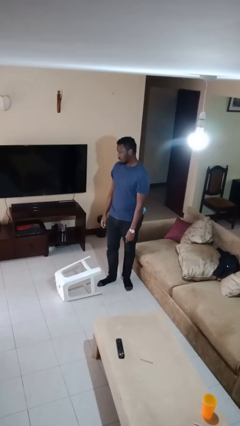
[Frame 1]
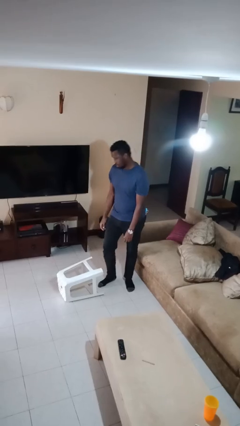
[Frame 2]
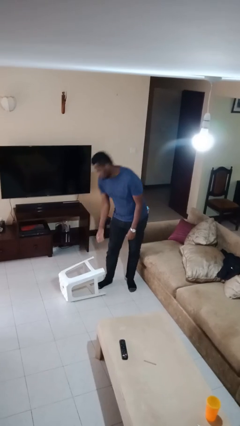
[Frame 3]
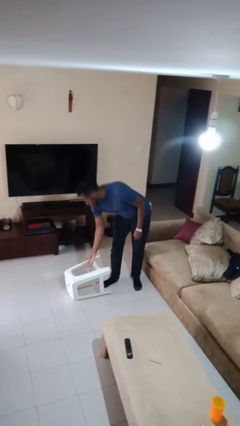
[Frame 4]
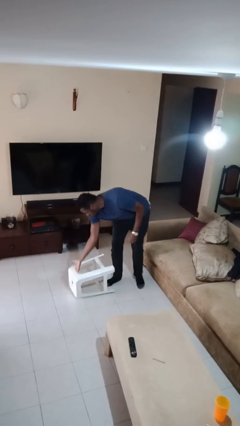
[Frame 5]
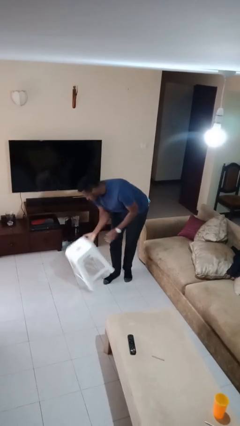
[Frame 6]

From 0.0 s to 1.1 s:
person knocks over furniture

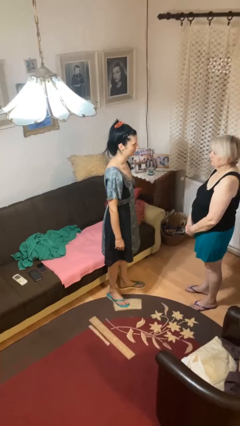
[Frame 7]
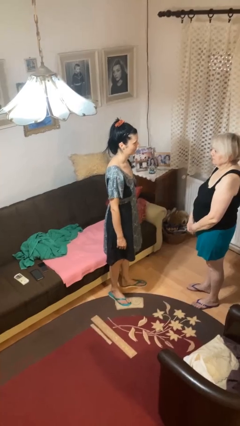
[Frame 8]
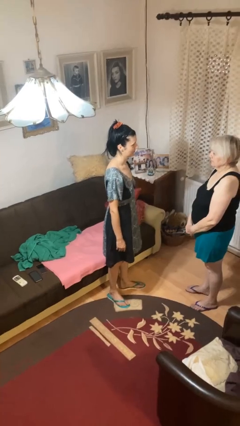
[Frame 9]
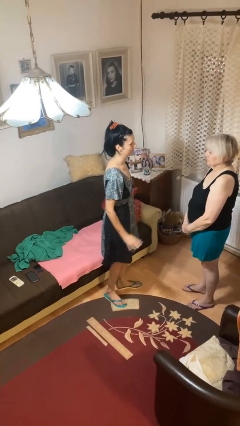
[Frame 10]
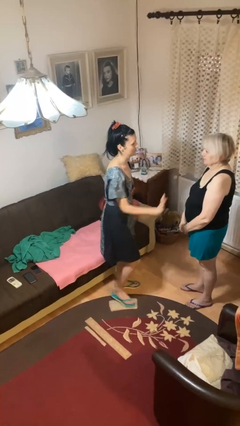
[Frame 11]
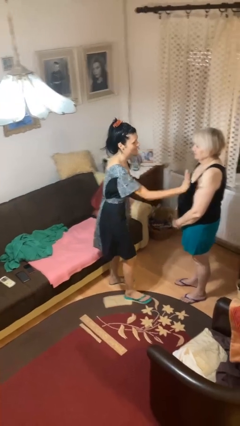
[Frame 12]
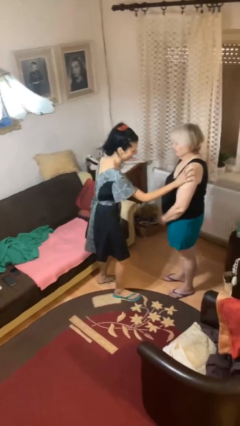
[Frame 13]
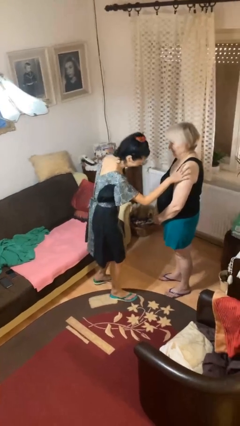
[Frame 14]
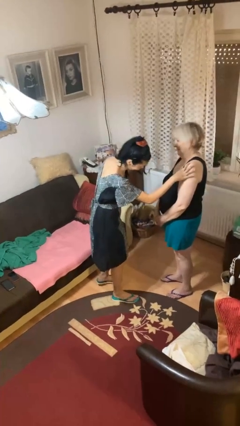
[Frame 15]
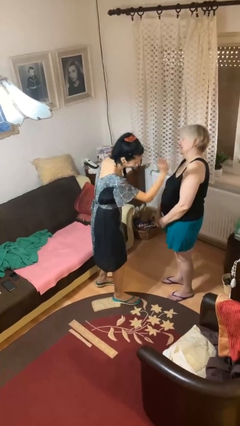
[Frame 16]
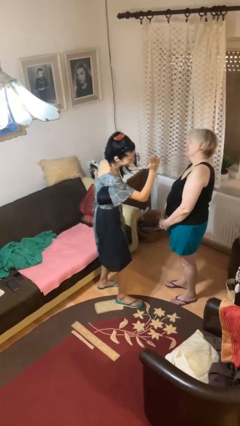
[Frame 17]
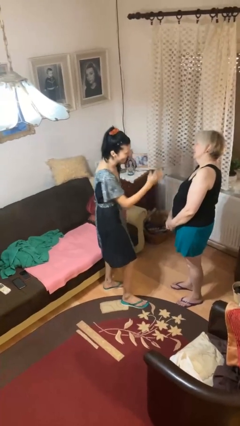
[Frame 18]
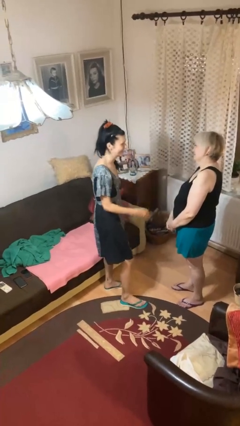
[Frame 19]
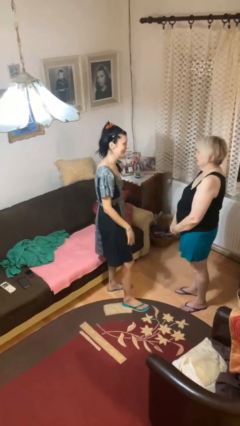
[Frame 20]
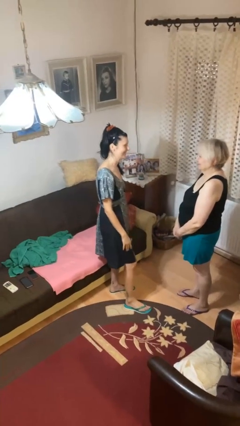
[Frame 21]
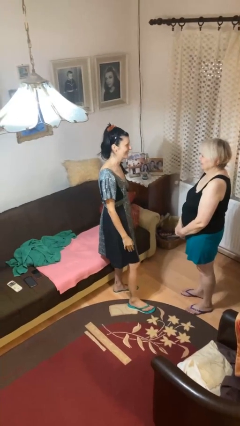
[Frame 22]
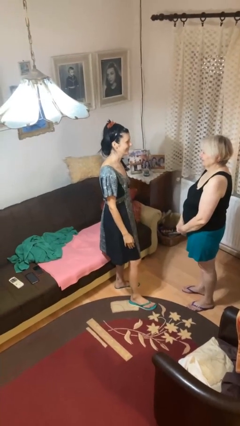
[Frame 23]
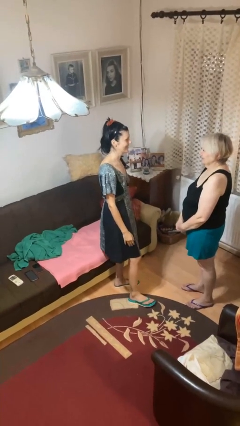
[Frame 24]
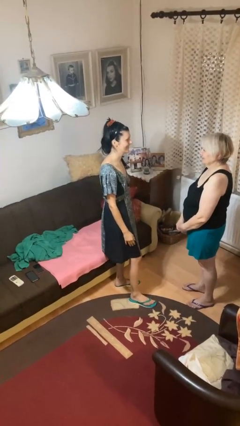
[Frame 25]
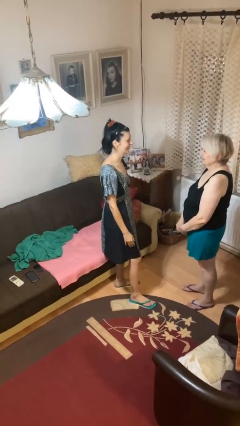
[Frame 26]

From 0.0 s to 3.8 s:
person shoves person

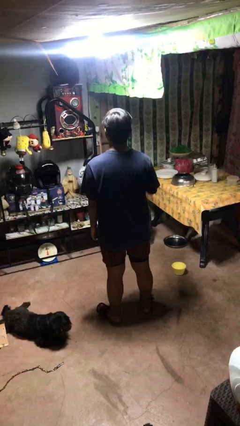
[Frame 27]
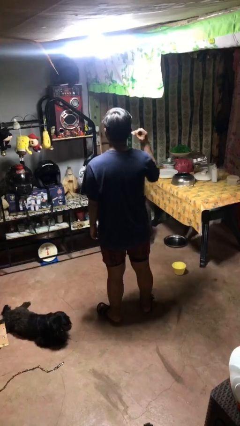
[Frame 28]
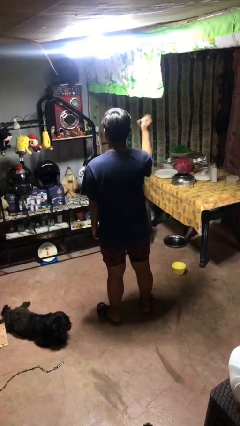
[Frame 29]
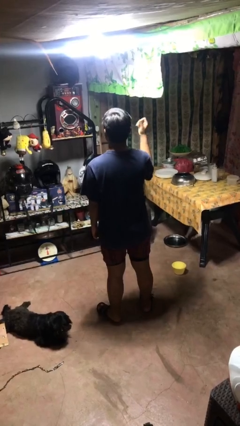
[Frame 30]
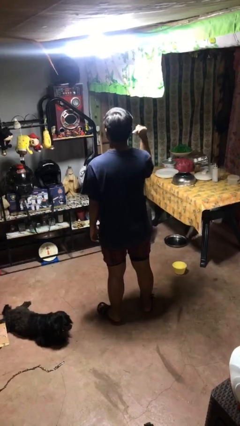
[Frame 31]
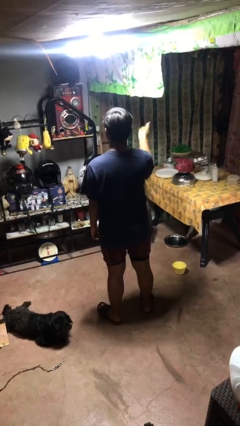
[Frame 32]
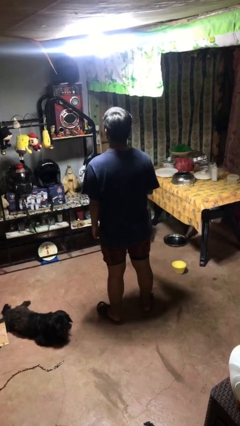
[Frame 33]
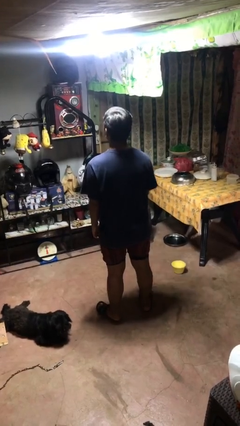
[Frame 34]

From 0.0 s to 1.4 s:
person snaps fingers

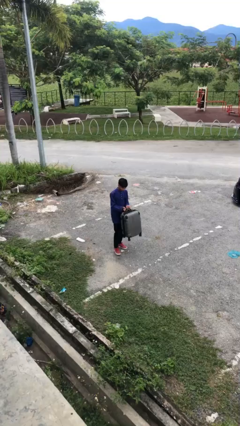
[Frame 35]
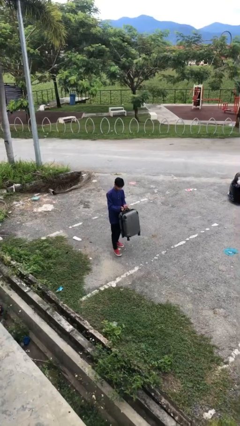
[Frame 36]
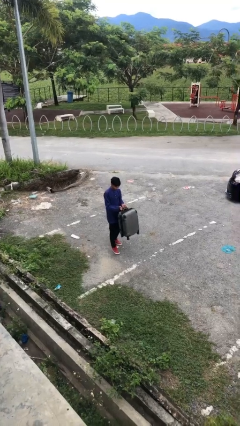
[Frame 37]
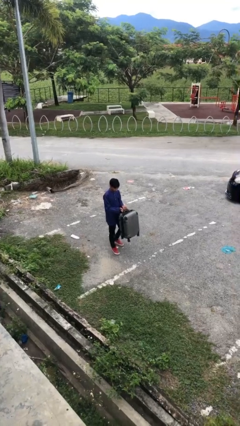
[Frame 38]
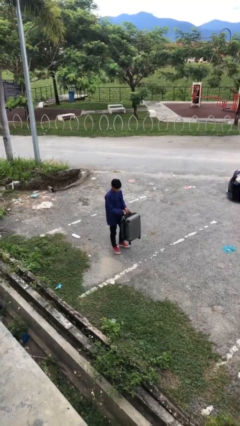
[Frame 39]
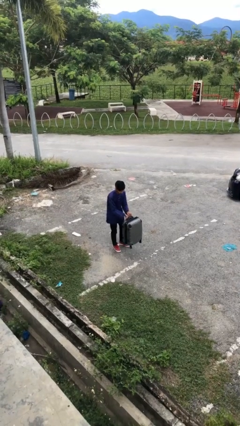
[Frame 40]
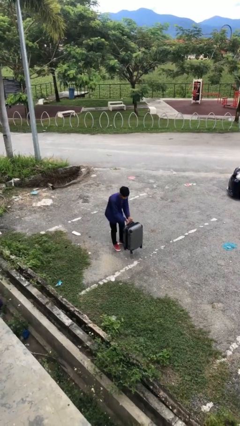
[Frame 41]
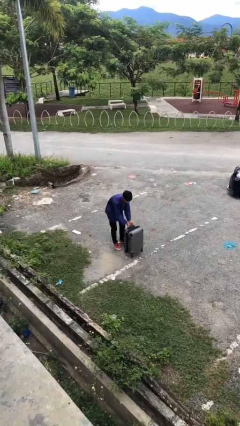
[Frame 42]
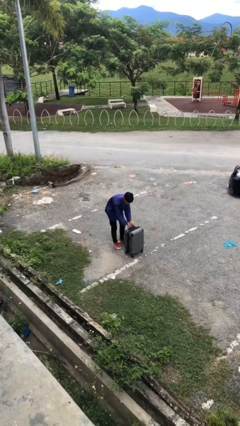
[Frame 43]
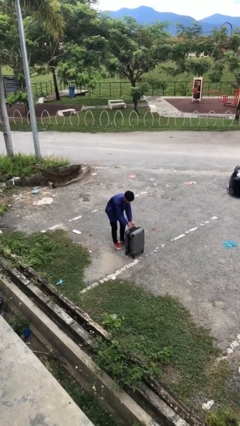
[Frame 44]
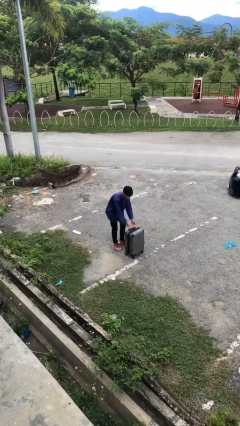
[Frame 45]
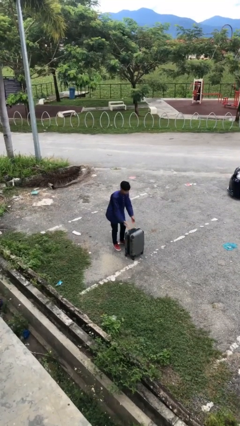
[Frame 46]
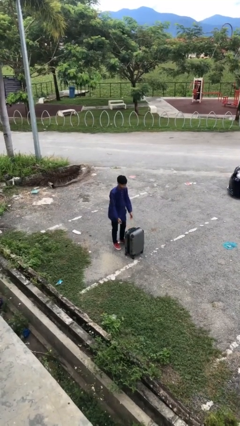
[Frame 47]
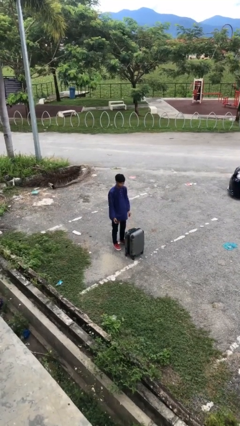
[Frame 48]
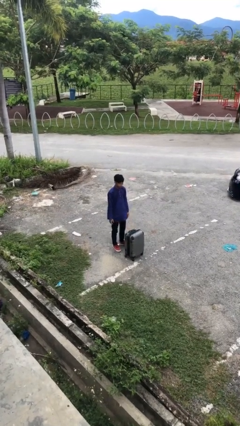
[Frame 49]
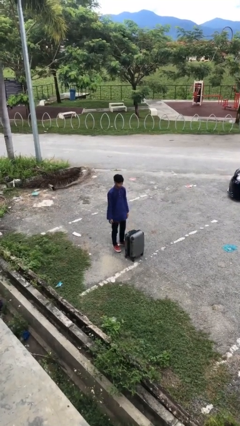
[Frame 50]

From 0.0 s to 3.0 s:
person puts down object on floor

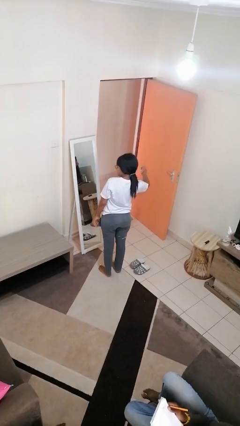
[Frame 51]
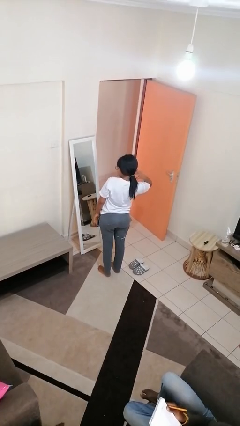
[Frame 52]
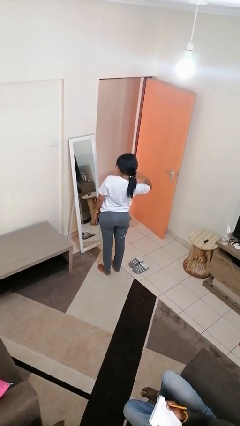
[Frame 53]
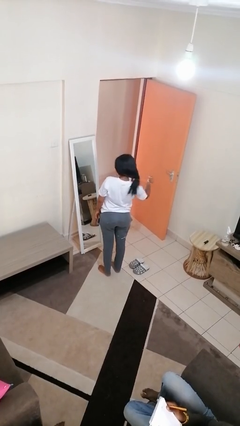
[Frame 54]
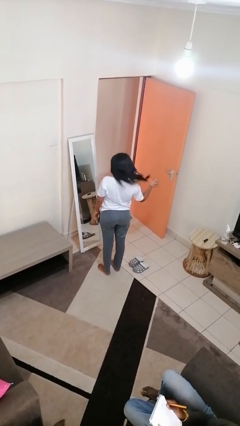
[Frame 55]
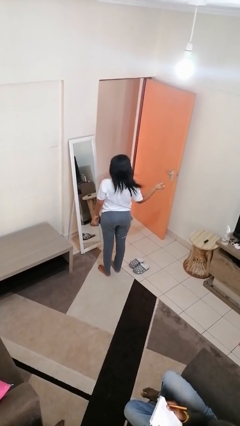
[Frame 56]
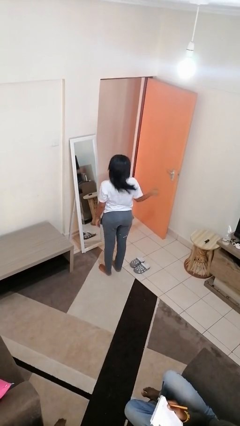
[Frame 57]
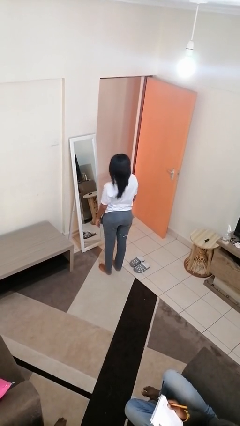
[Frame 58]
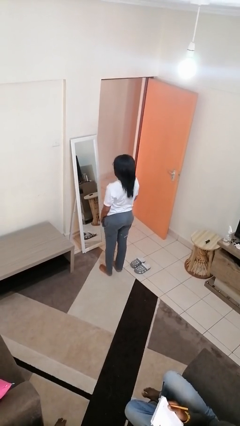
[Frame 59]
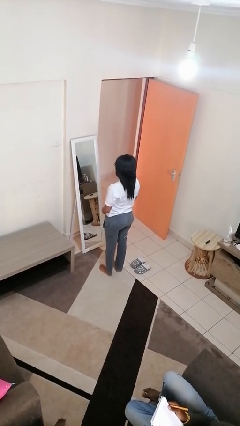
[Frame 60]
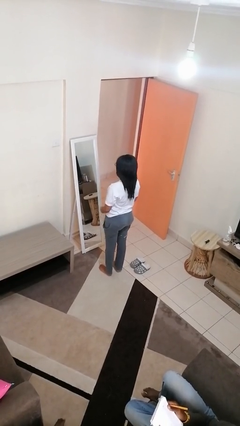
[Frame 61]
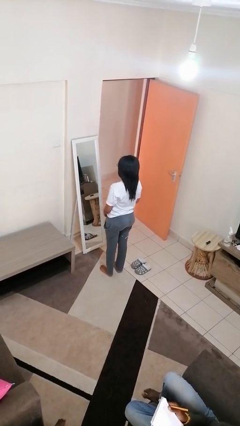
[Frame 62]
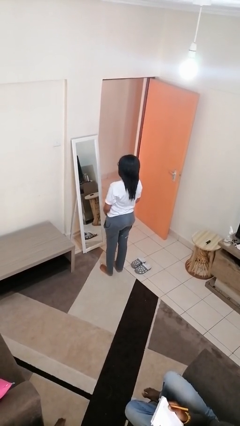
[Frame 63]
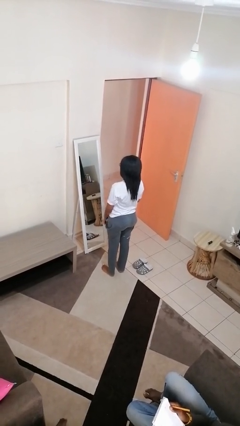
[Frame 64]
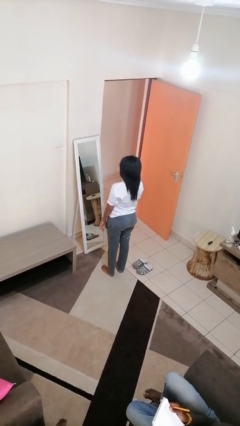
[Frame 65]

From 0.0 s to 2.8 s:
person takes off hairtie

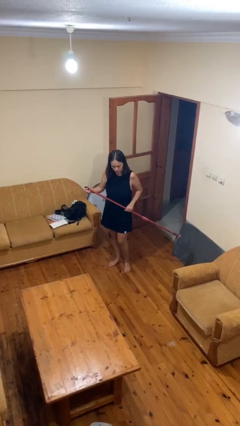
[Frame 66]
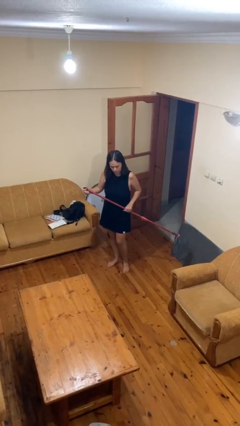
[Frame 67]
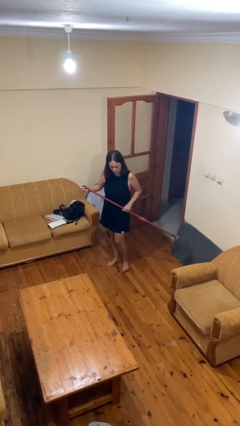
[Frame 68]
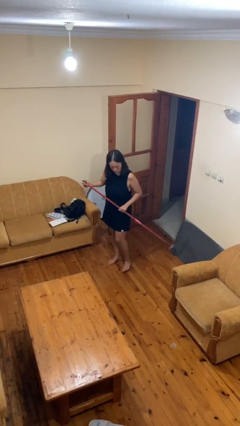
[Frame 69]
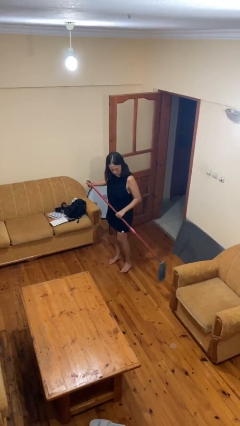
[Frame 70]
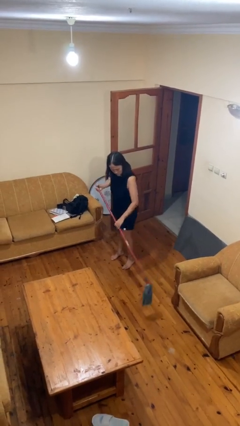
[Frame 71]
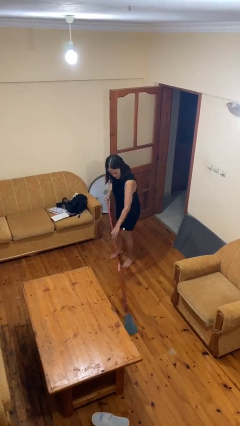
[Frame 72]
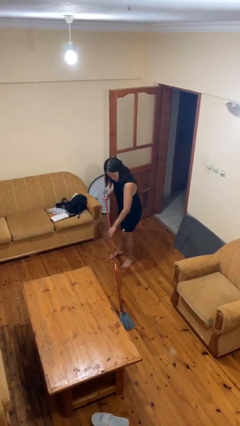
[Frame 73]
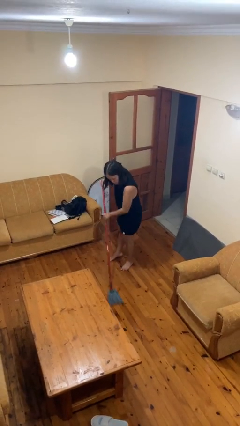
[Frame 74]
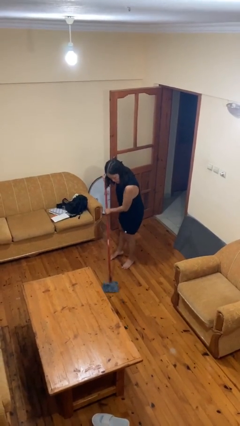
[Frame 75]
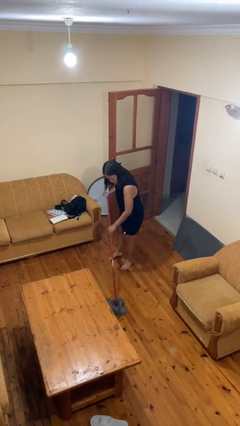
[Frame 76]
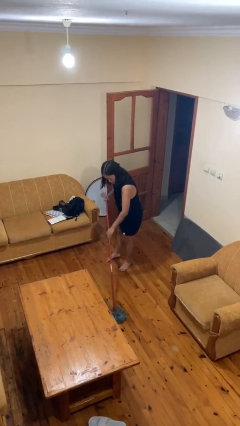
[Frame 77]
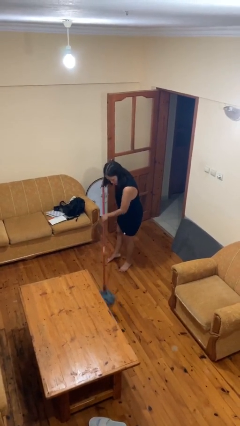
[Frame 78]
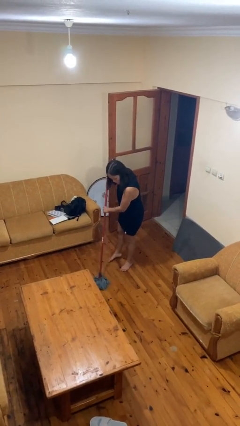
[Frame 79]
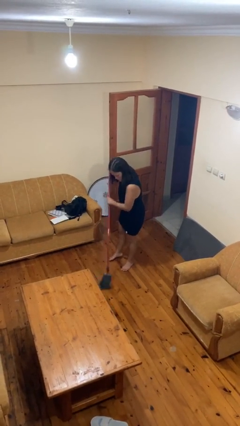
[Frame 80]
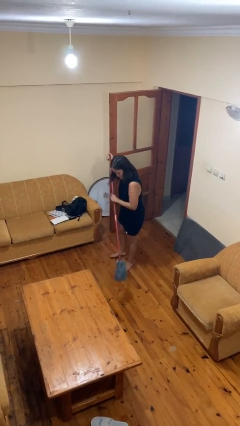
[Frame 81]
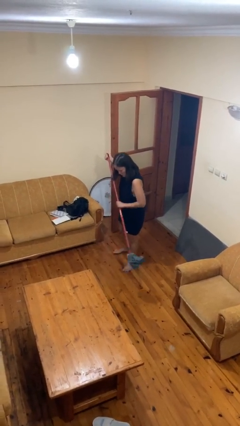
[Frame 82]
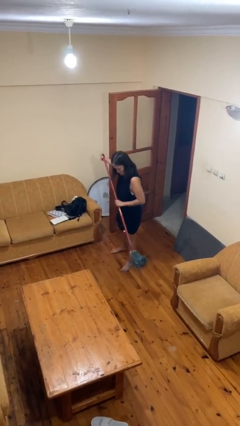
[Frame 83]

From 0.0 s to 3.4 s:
person mops

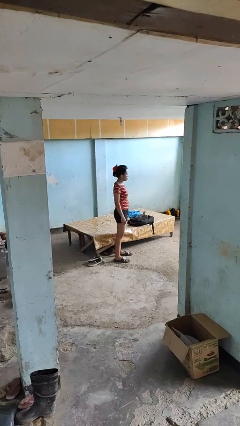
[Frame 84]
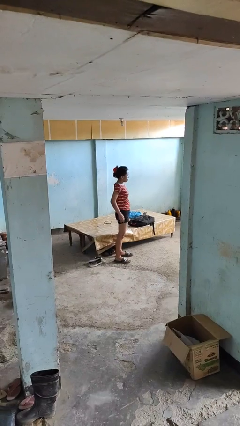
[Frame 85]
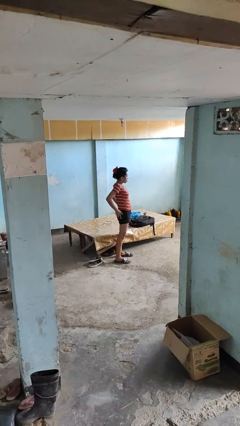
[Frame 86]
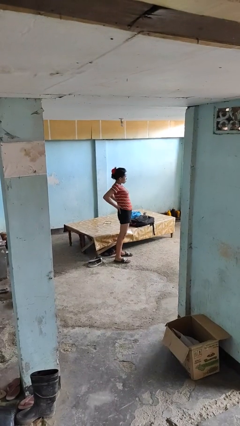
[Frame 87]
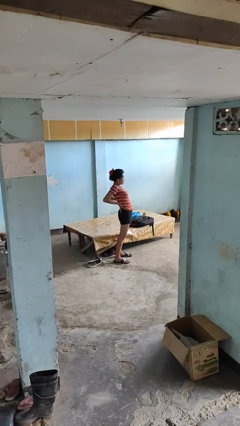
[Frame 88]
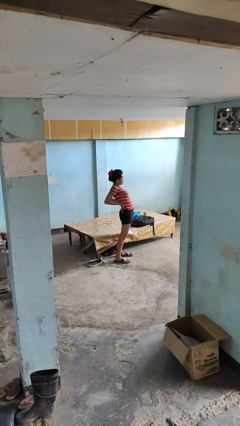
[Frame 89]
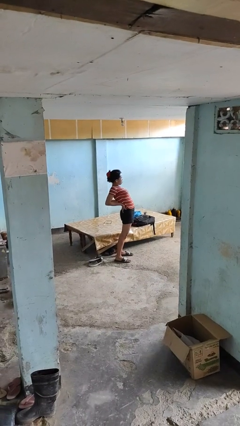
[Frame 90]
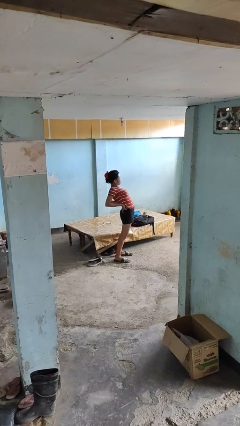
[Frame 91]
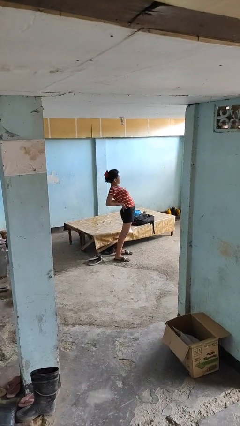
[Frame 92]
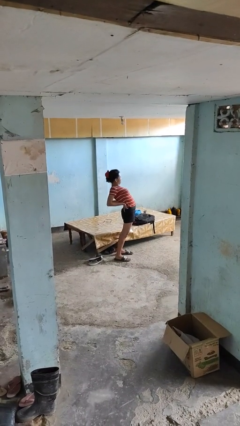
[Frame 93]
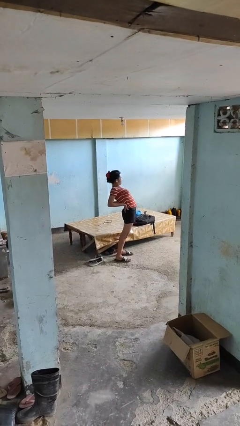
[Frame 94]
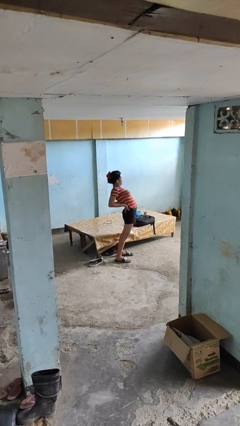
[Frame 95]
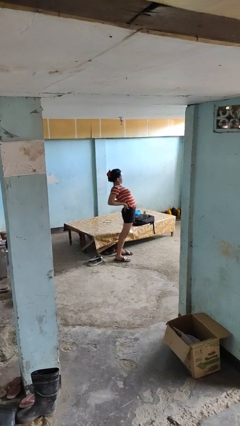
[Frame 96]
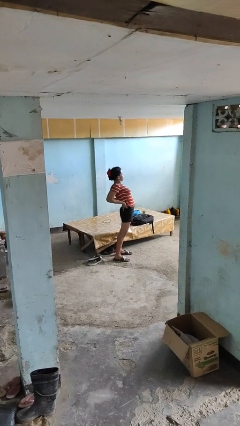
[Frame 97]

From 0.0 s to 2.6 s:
person stretches back
